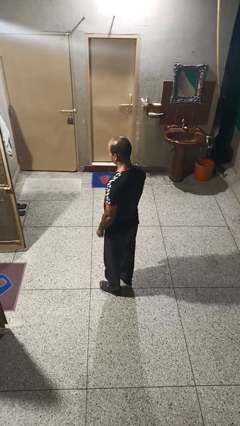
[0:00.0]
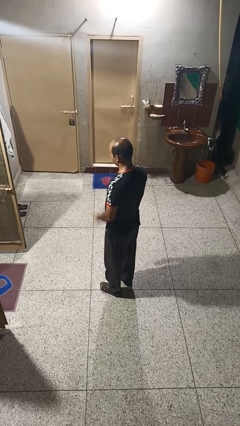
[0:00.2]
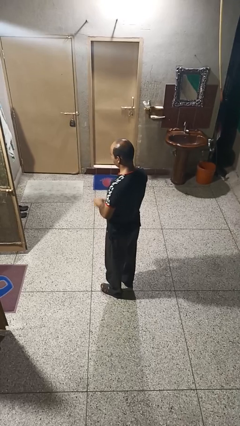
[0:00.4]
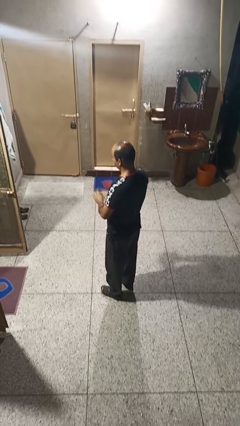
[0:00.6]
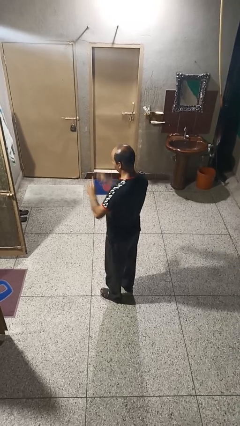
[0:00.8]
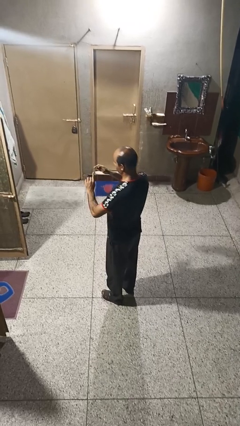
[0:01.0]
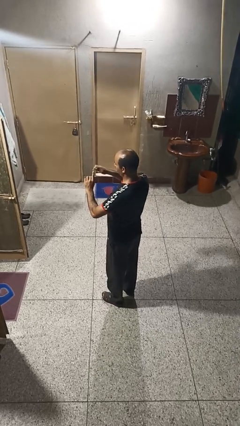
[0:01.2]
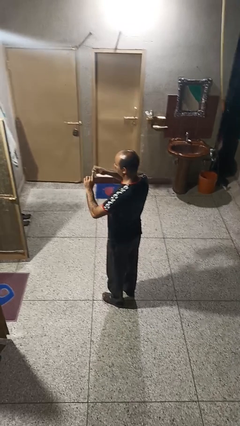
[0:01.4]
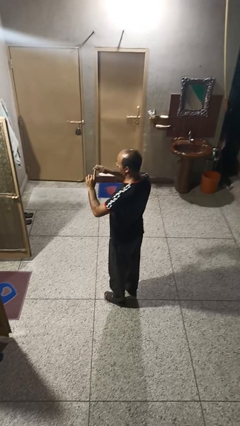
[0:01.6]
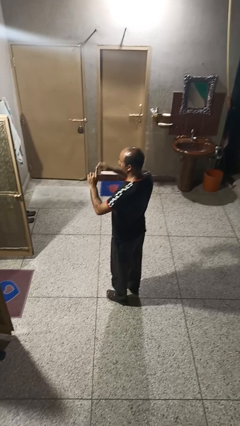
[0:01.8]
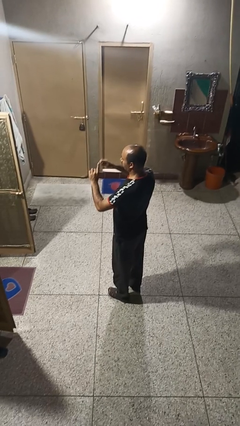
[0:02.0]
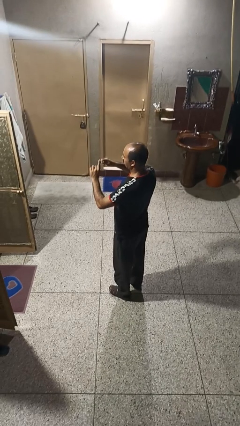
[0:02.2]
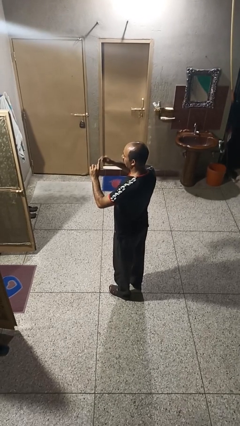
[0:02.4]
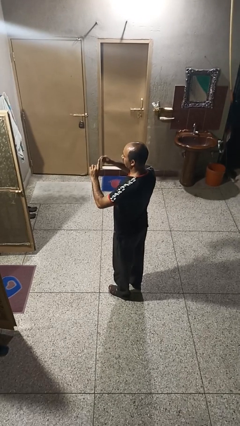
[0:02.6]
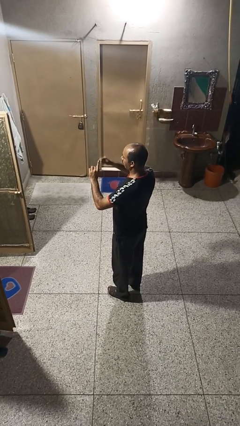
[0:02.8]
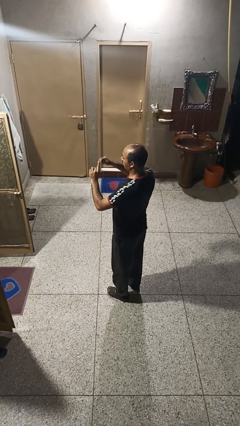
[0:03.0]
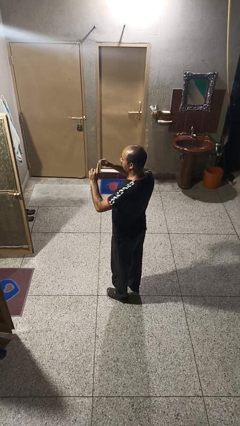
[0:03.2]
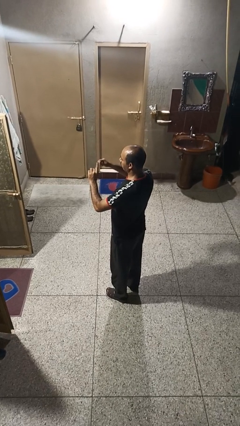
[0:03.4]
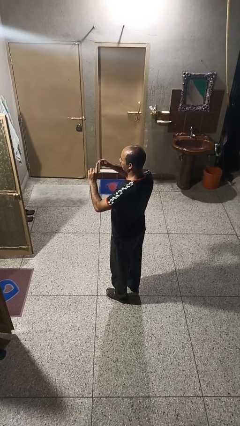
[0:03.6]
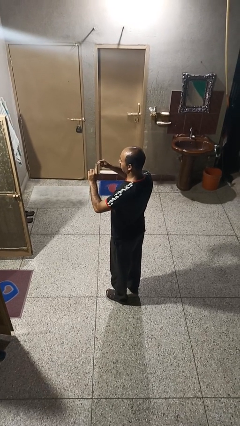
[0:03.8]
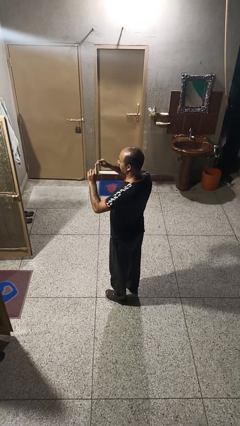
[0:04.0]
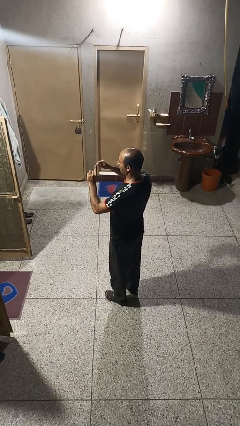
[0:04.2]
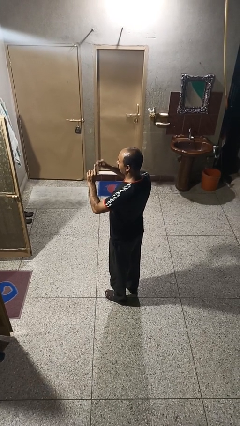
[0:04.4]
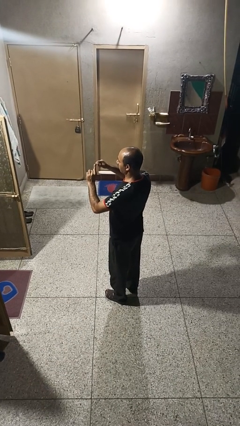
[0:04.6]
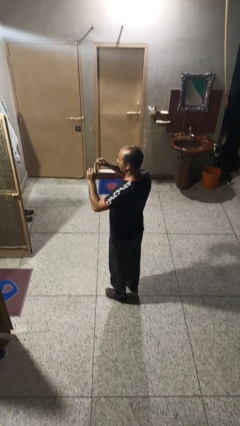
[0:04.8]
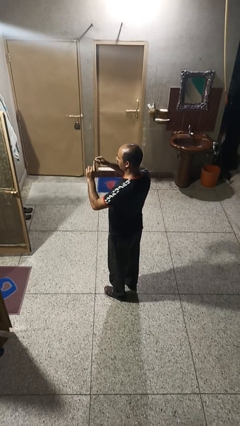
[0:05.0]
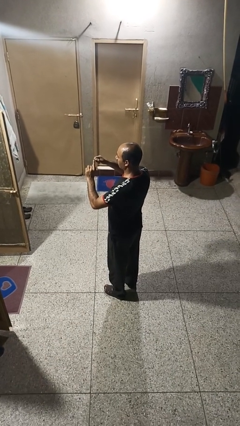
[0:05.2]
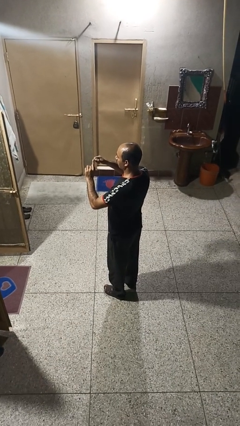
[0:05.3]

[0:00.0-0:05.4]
person files fingernails

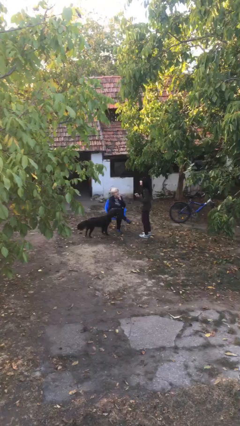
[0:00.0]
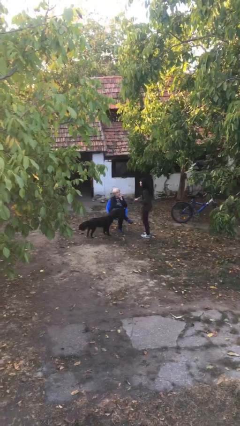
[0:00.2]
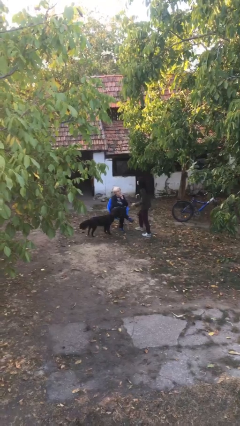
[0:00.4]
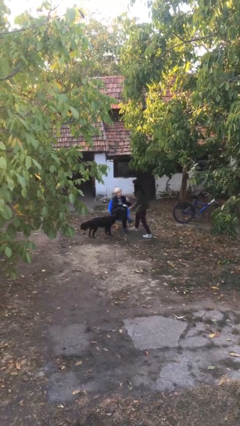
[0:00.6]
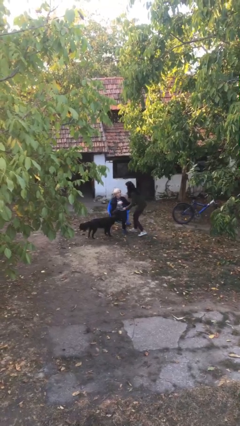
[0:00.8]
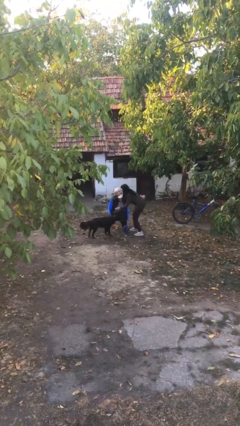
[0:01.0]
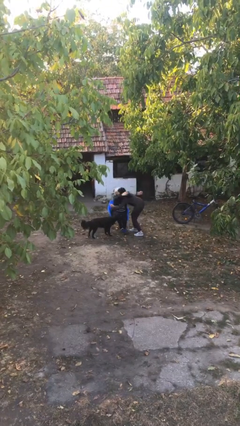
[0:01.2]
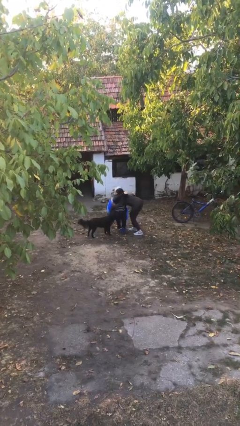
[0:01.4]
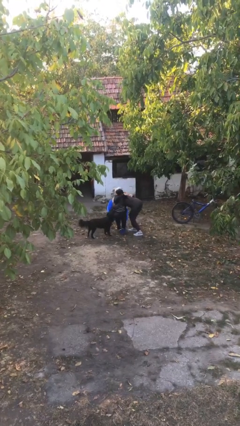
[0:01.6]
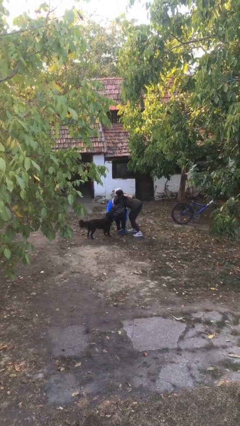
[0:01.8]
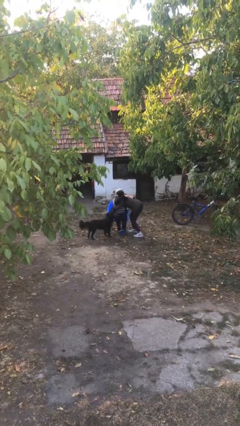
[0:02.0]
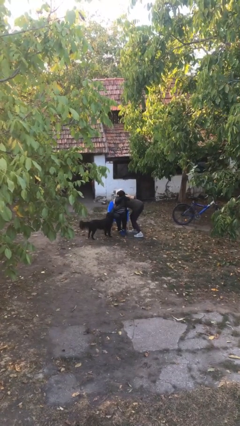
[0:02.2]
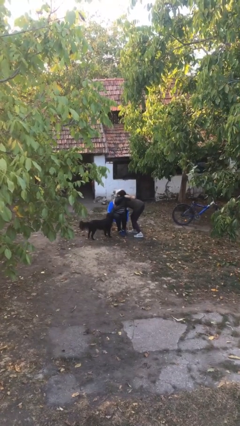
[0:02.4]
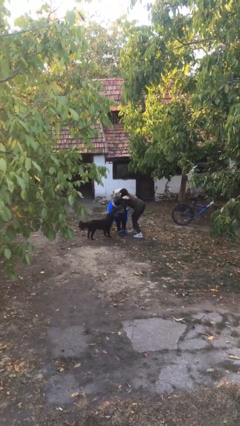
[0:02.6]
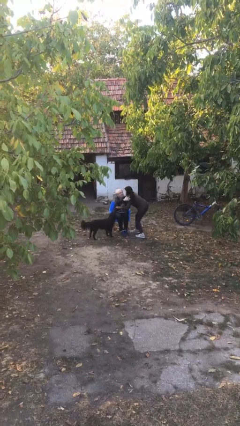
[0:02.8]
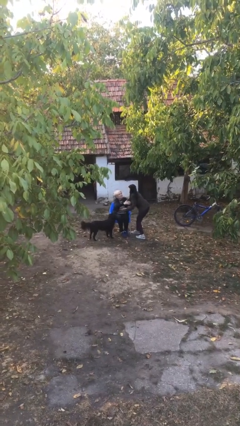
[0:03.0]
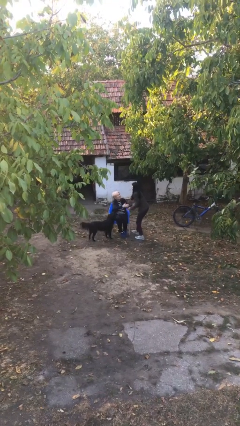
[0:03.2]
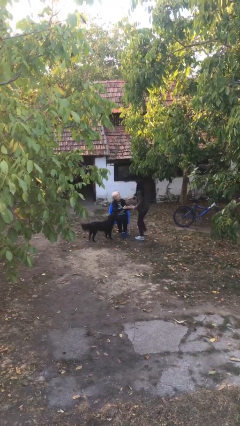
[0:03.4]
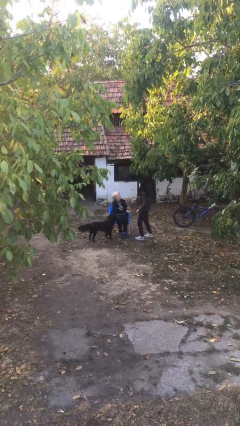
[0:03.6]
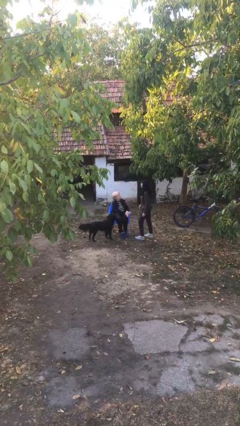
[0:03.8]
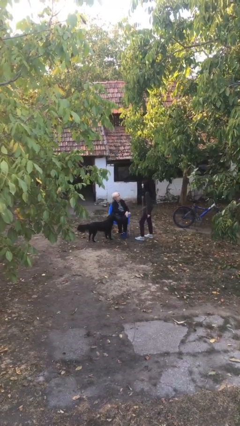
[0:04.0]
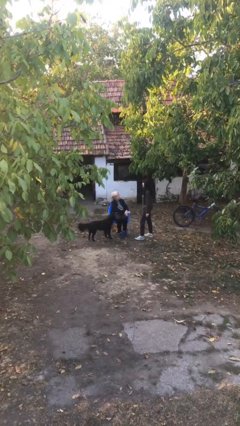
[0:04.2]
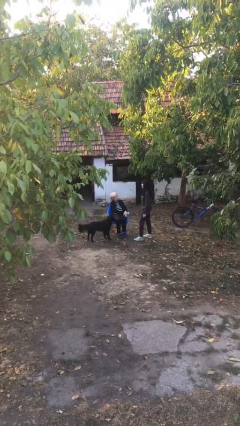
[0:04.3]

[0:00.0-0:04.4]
person embraces person

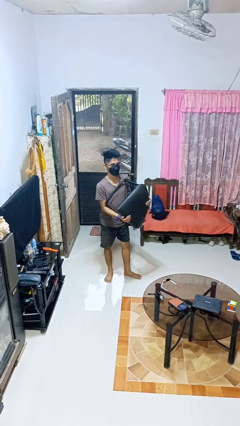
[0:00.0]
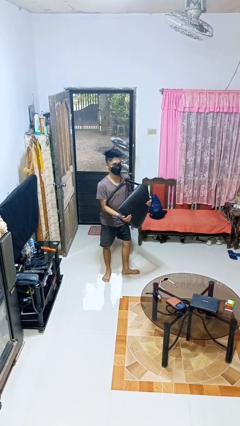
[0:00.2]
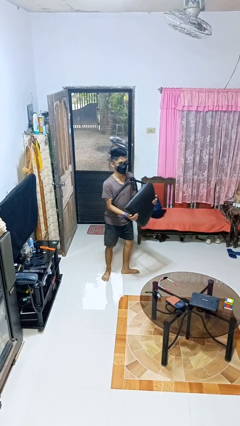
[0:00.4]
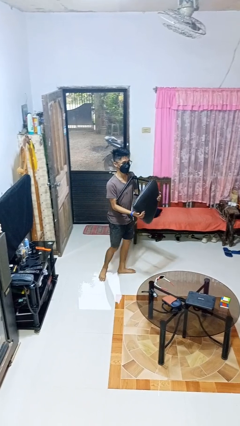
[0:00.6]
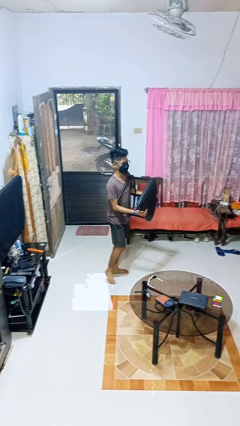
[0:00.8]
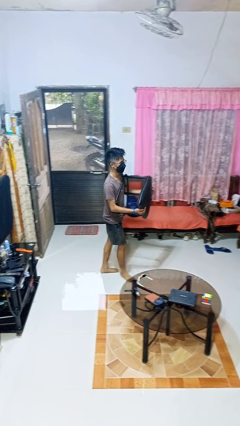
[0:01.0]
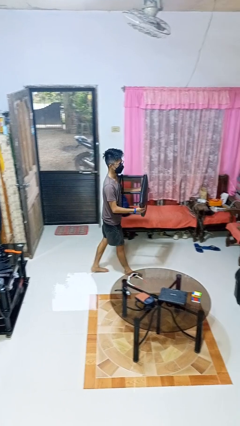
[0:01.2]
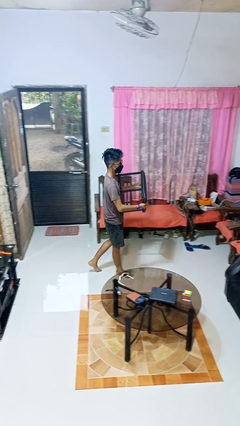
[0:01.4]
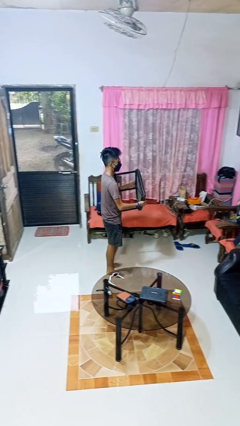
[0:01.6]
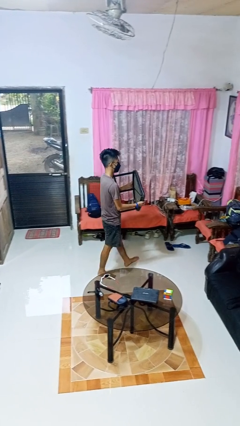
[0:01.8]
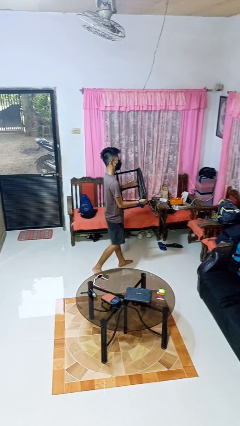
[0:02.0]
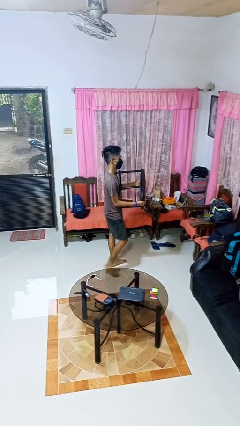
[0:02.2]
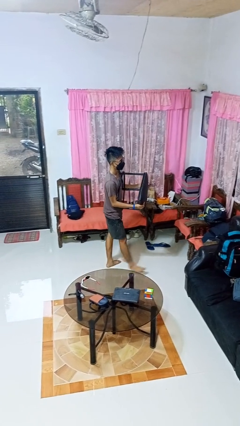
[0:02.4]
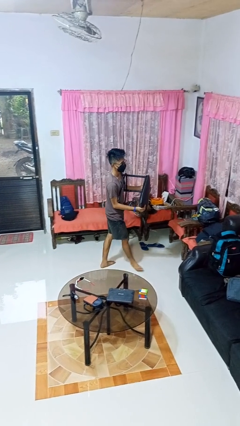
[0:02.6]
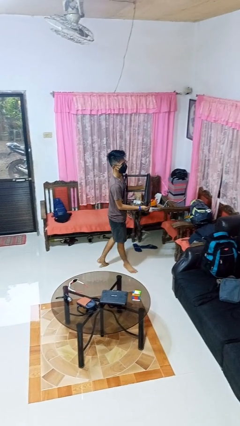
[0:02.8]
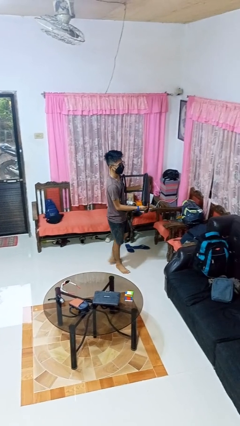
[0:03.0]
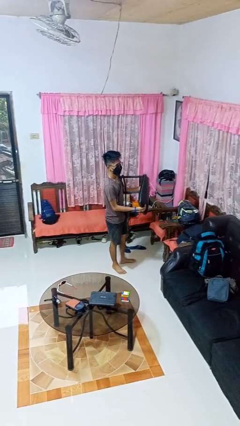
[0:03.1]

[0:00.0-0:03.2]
person carries furniture

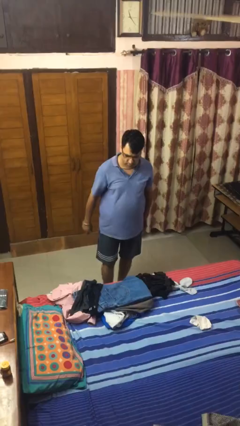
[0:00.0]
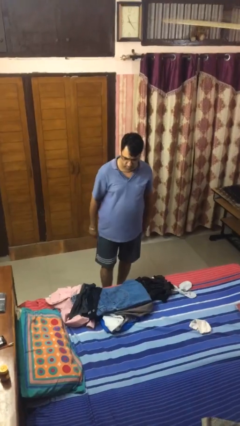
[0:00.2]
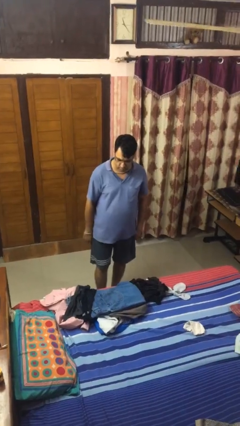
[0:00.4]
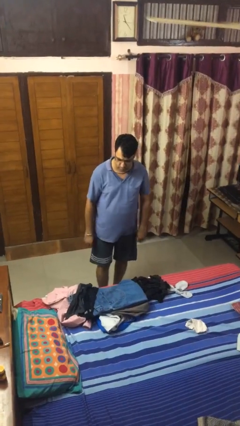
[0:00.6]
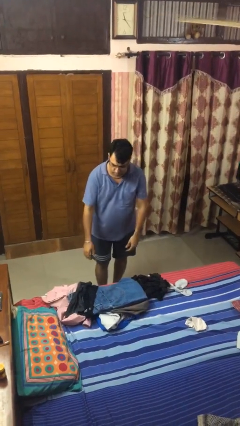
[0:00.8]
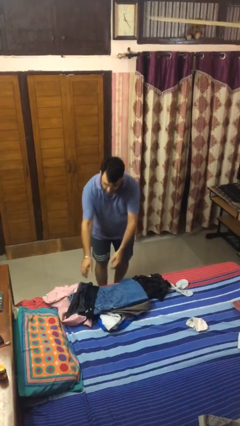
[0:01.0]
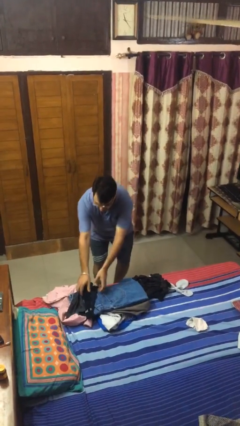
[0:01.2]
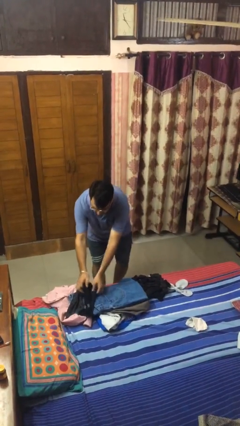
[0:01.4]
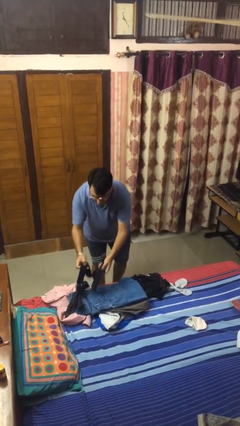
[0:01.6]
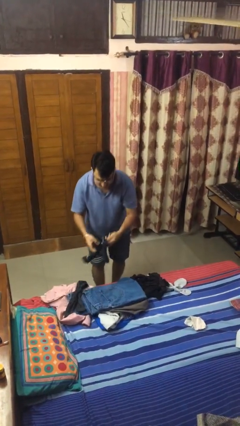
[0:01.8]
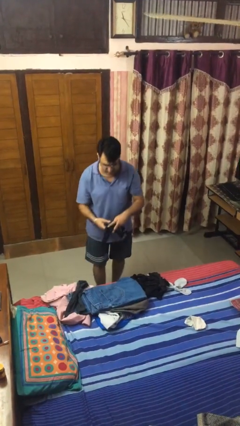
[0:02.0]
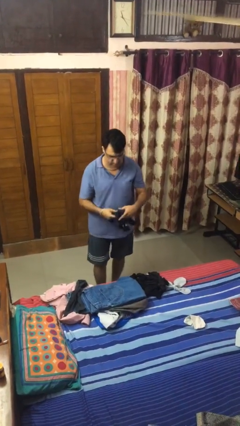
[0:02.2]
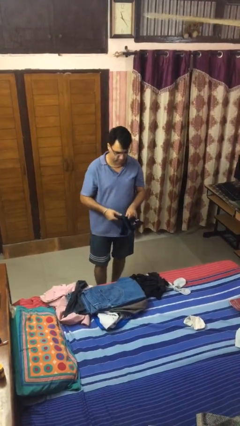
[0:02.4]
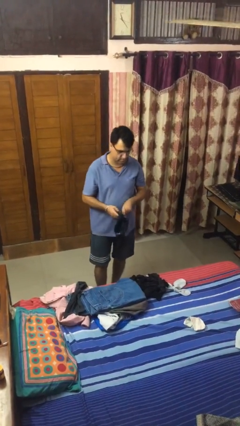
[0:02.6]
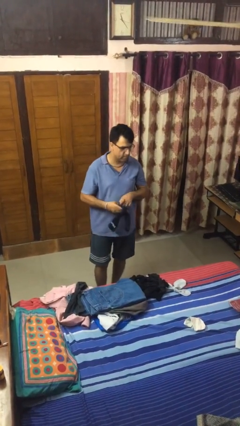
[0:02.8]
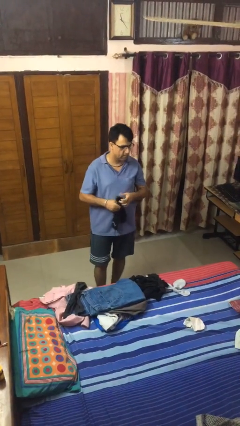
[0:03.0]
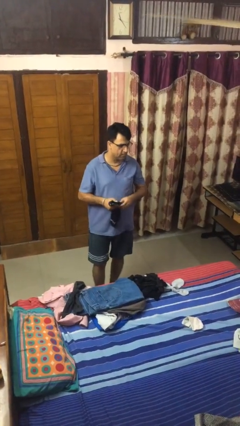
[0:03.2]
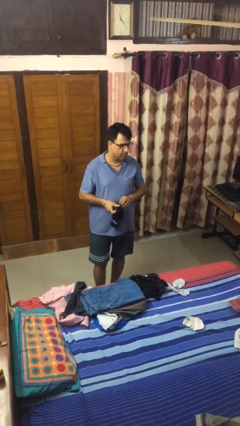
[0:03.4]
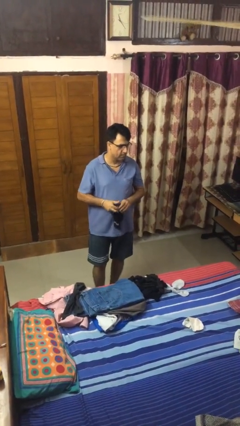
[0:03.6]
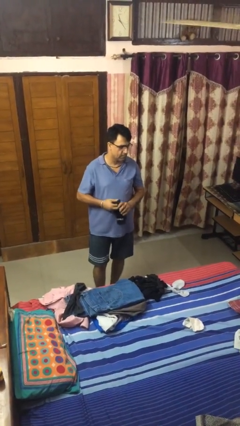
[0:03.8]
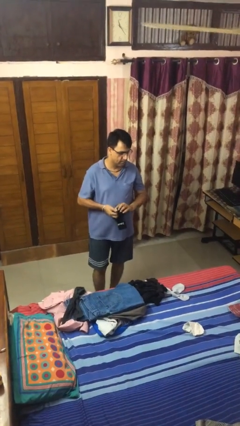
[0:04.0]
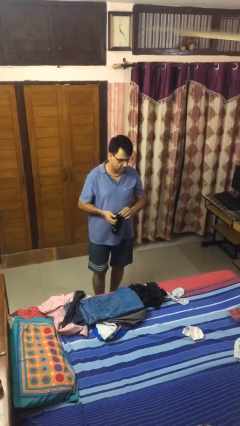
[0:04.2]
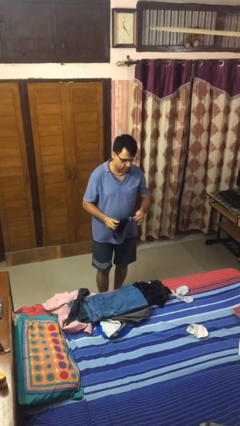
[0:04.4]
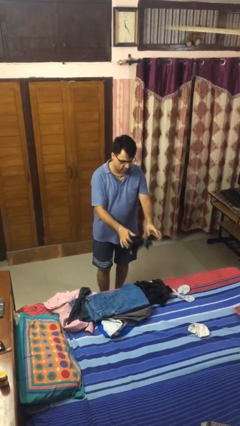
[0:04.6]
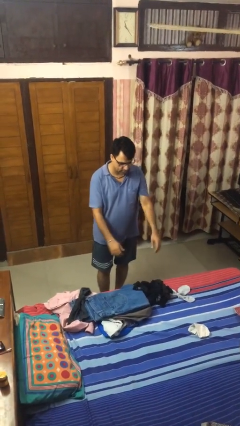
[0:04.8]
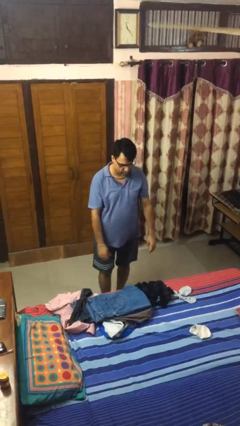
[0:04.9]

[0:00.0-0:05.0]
person folds socks
